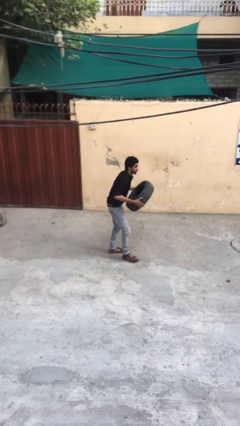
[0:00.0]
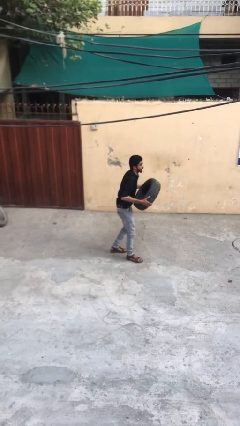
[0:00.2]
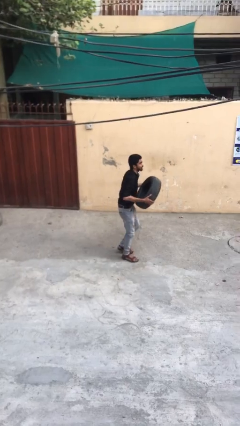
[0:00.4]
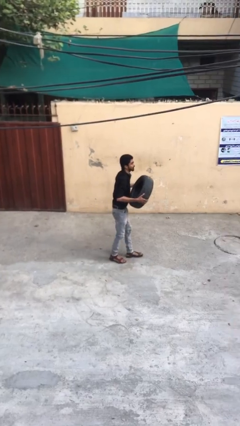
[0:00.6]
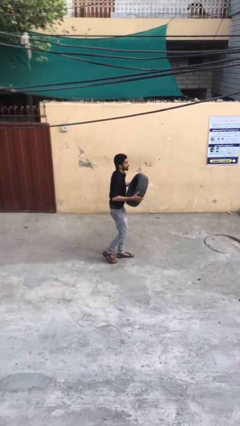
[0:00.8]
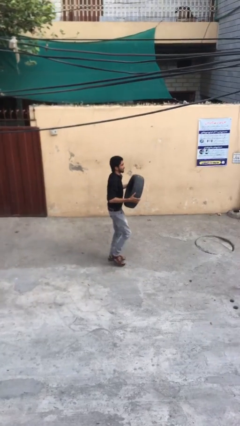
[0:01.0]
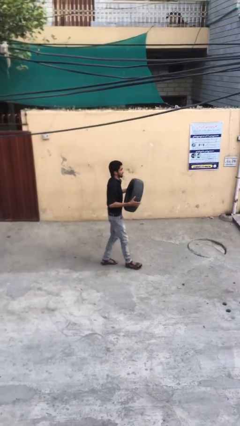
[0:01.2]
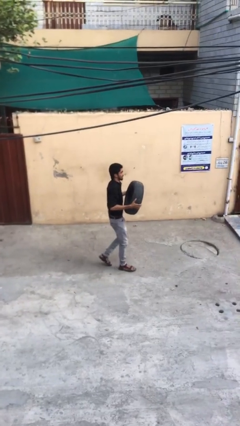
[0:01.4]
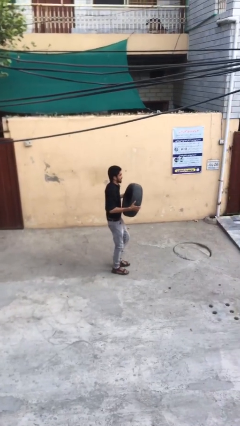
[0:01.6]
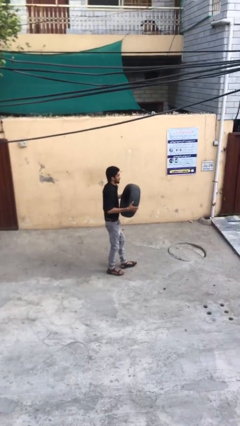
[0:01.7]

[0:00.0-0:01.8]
person carries heavy object

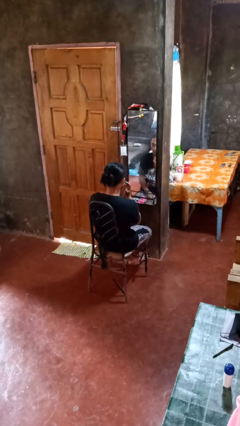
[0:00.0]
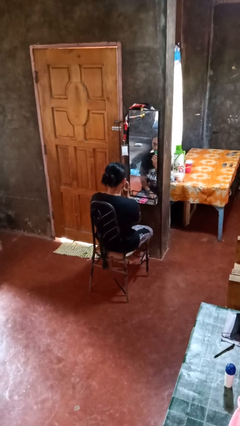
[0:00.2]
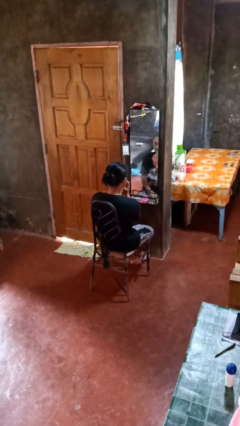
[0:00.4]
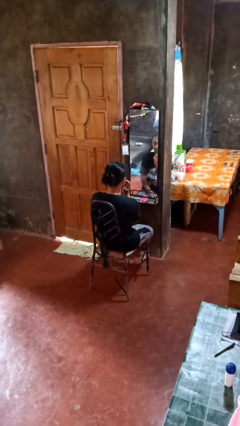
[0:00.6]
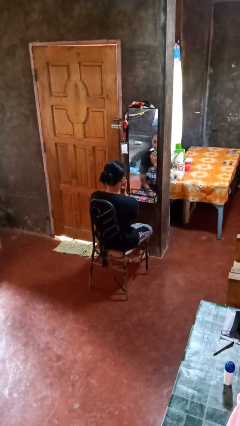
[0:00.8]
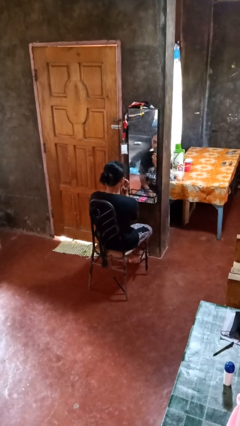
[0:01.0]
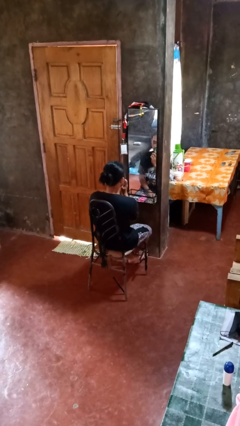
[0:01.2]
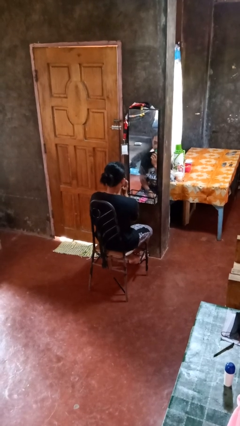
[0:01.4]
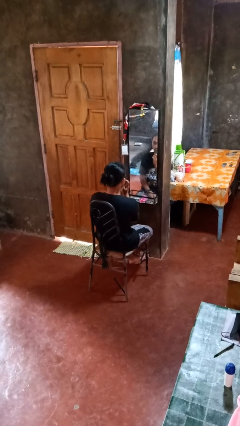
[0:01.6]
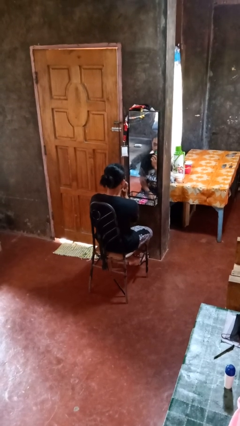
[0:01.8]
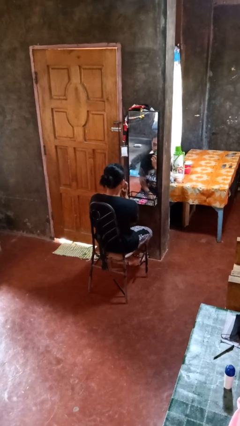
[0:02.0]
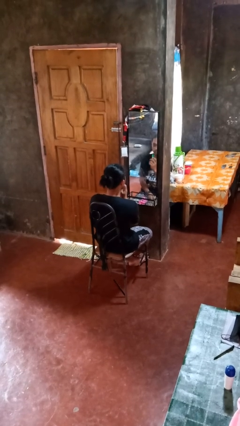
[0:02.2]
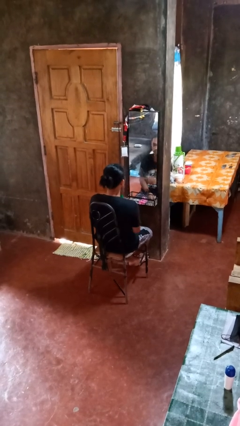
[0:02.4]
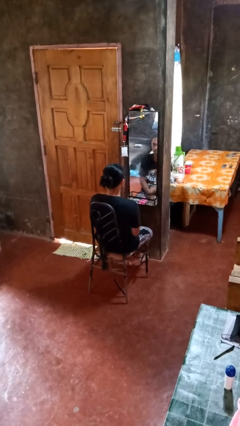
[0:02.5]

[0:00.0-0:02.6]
person applies lip makeup

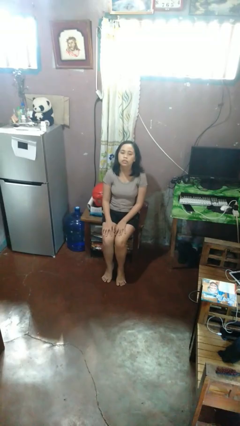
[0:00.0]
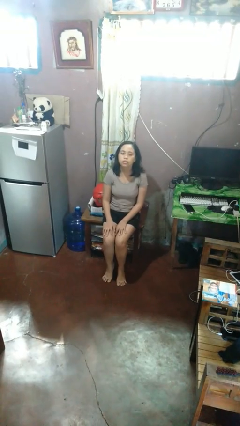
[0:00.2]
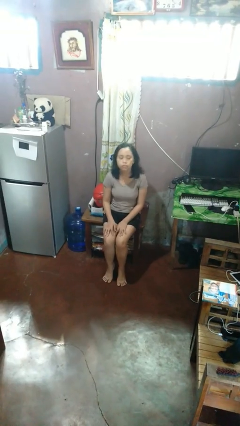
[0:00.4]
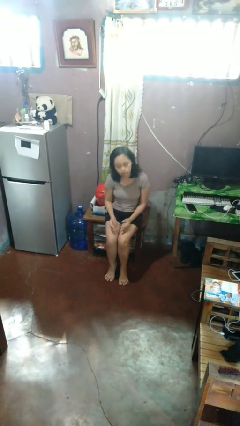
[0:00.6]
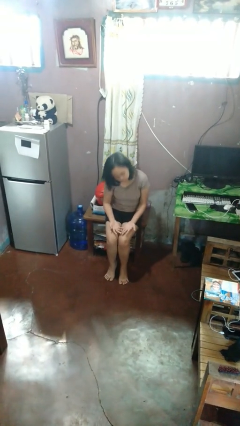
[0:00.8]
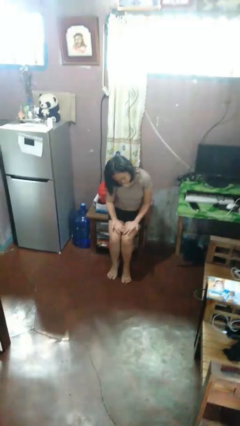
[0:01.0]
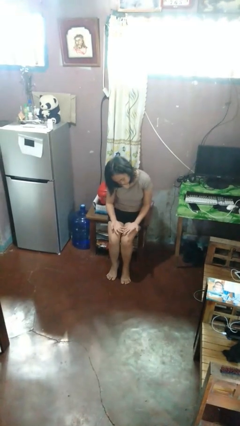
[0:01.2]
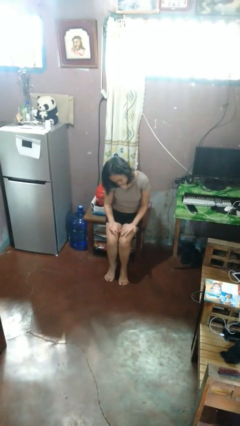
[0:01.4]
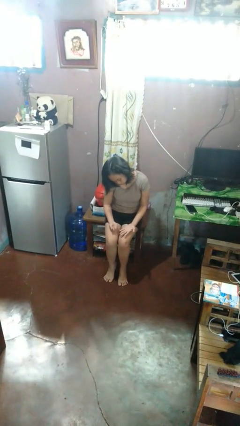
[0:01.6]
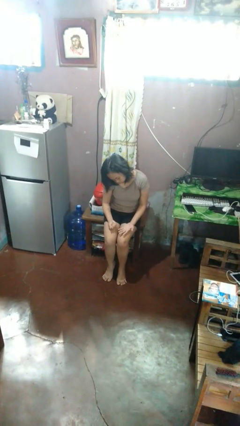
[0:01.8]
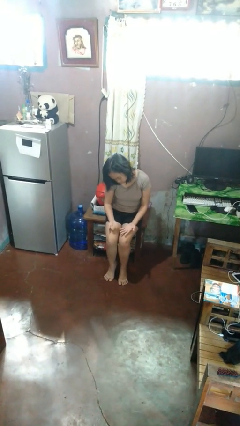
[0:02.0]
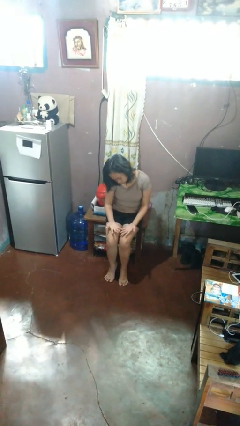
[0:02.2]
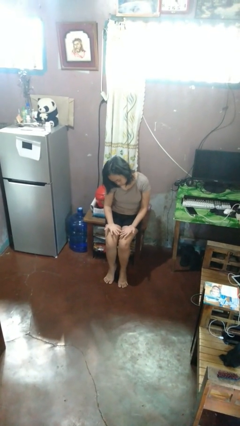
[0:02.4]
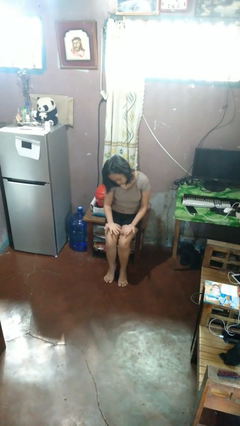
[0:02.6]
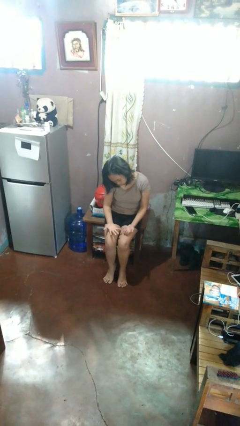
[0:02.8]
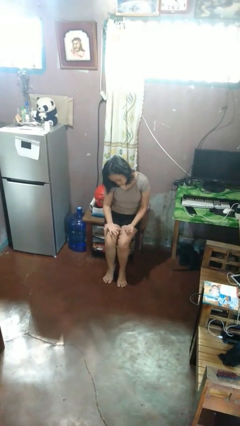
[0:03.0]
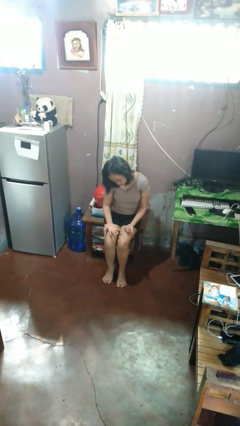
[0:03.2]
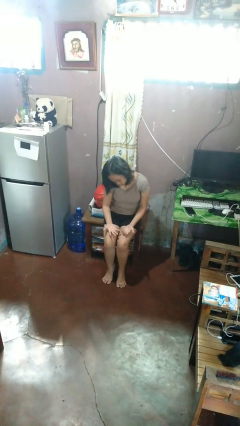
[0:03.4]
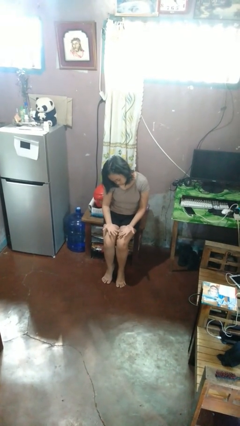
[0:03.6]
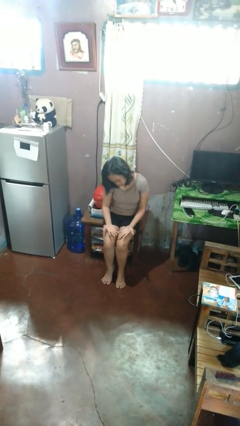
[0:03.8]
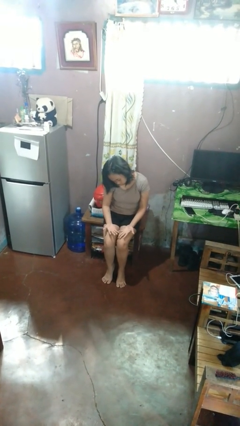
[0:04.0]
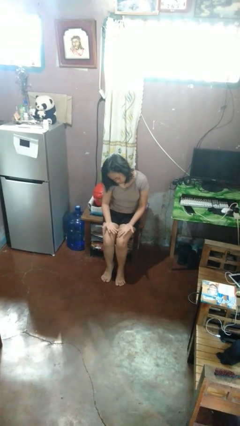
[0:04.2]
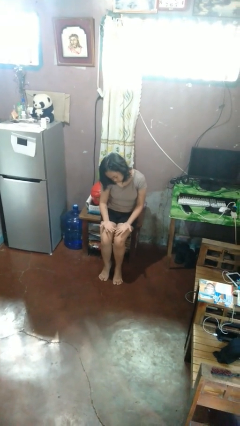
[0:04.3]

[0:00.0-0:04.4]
person looks at hands in lap

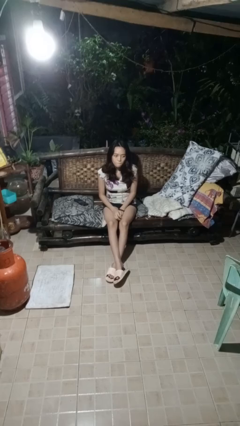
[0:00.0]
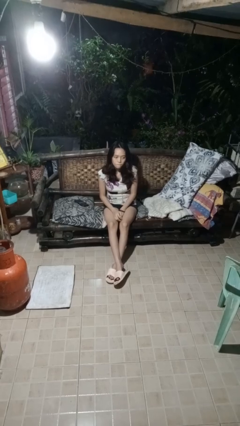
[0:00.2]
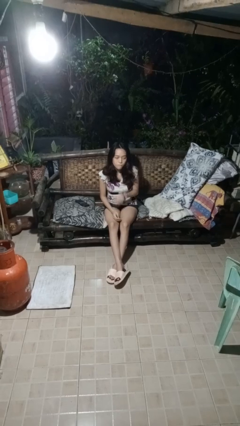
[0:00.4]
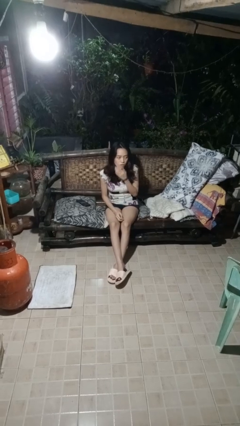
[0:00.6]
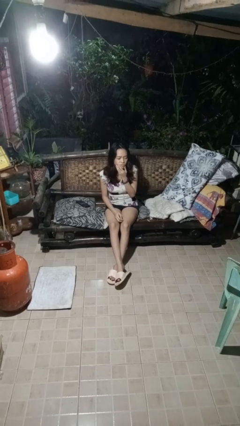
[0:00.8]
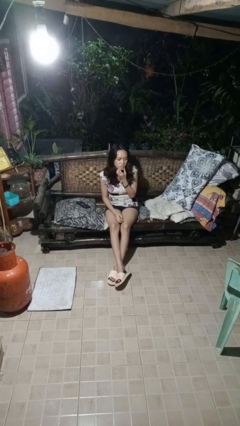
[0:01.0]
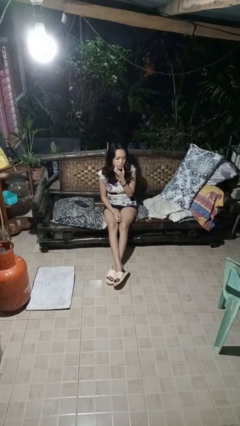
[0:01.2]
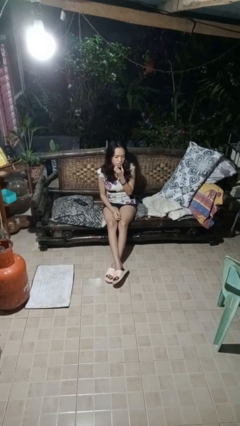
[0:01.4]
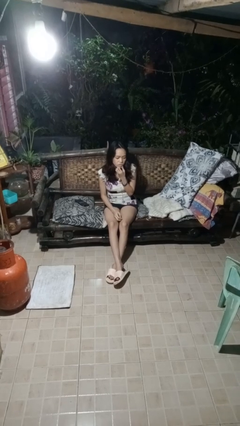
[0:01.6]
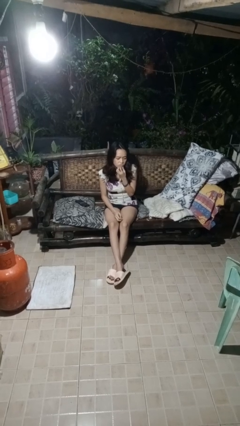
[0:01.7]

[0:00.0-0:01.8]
person strokes chin

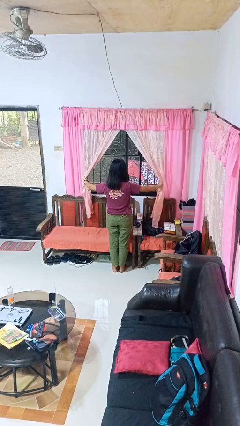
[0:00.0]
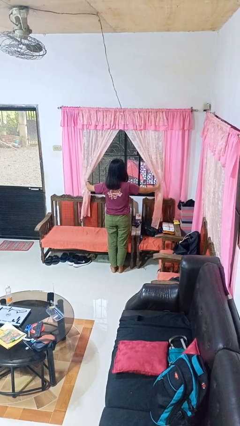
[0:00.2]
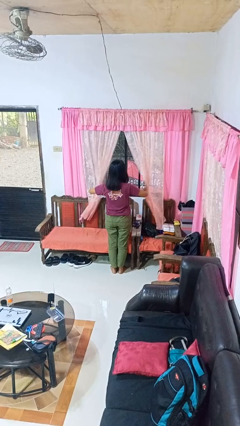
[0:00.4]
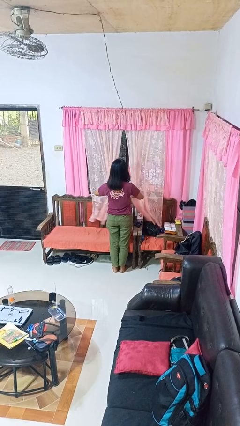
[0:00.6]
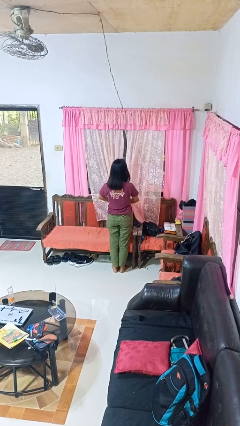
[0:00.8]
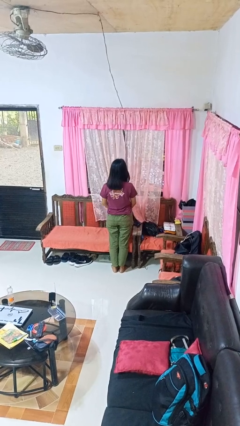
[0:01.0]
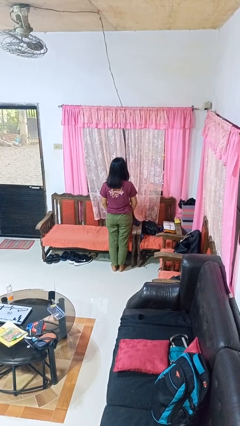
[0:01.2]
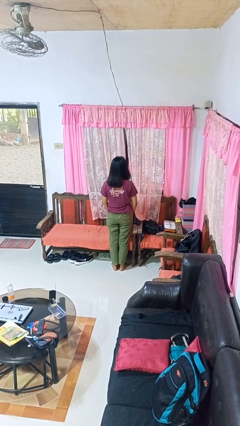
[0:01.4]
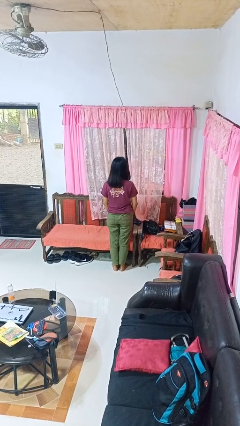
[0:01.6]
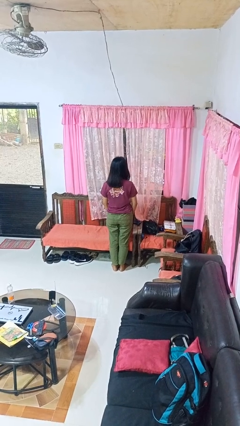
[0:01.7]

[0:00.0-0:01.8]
person closes curtains

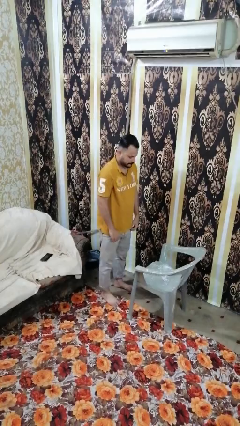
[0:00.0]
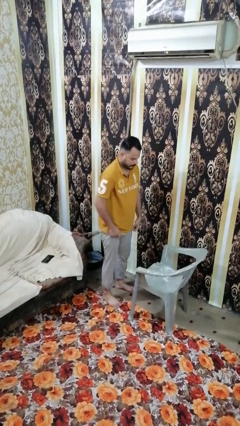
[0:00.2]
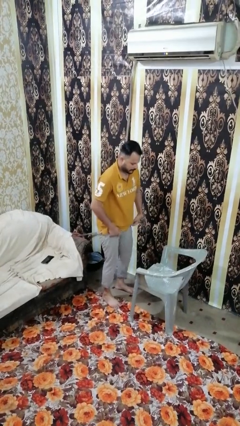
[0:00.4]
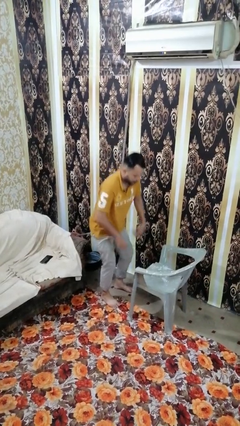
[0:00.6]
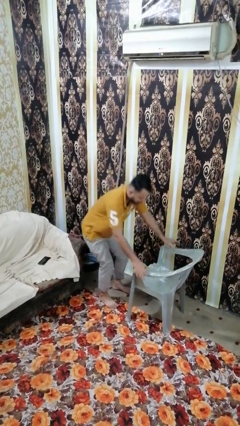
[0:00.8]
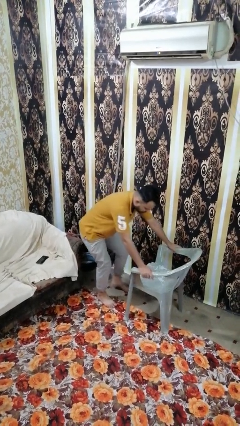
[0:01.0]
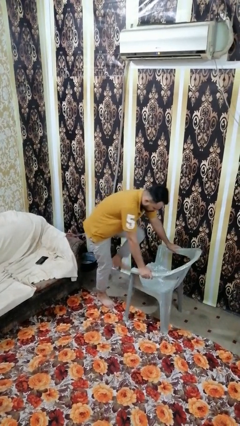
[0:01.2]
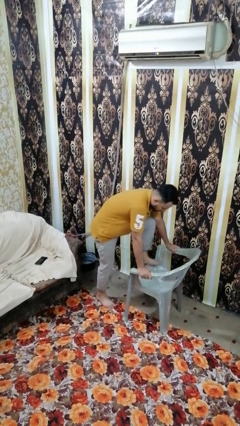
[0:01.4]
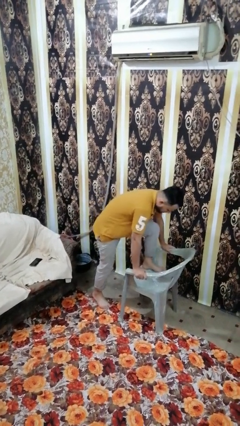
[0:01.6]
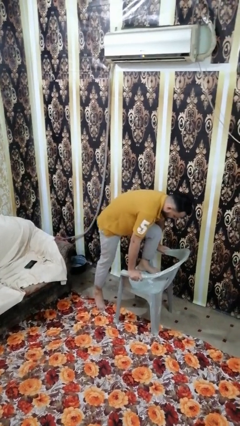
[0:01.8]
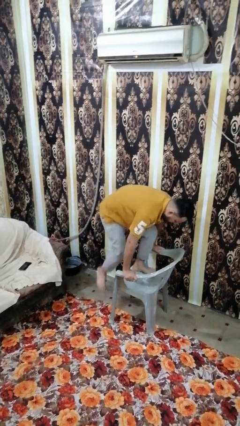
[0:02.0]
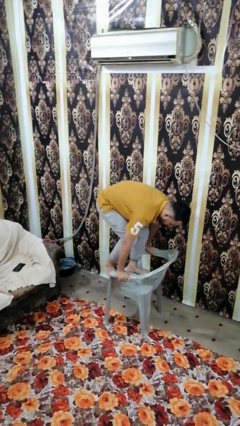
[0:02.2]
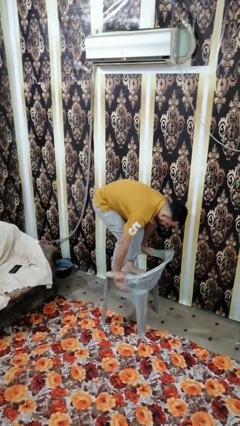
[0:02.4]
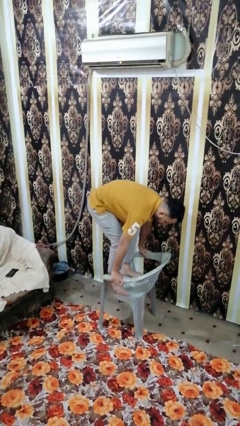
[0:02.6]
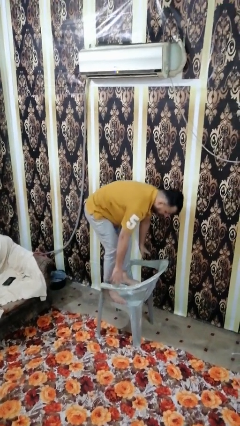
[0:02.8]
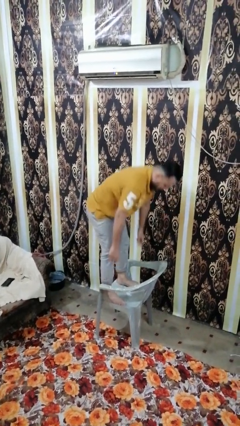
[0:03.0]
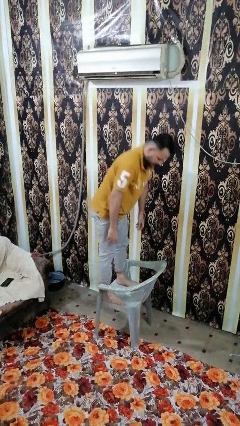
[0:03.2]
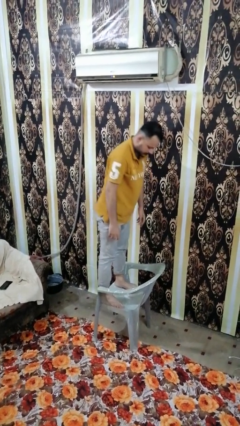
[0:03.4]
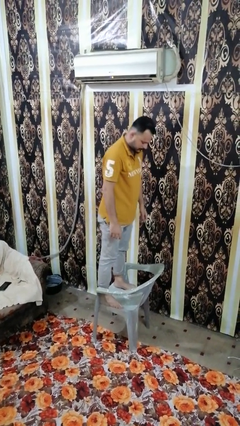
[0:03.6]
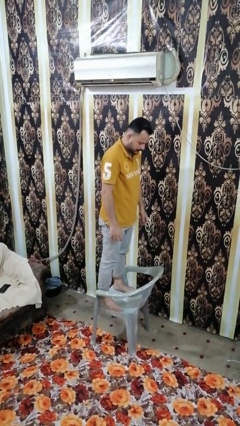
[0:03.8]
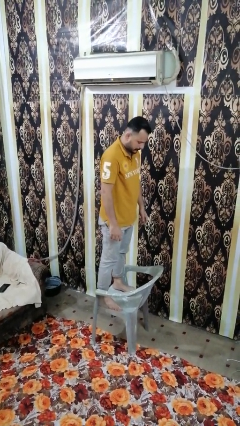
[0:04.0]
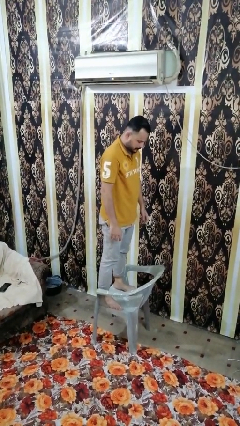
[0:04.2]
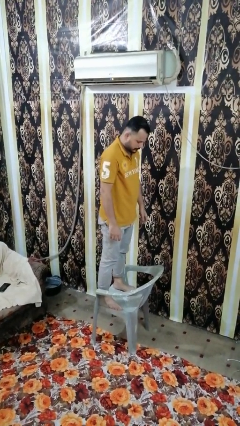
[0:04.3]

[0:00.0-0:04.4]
person climbs on chair
